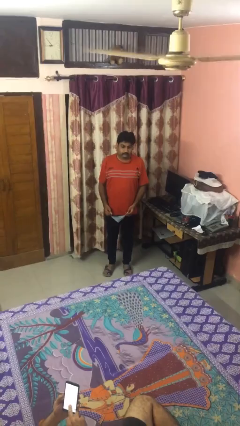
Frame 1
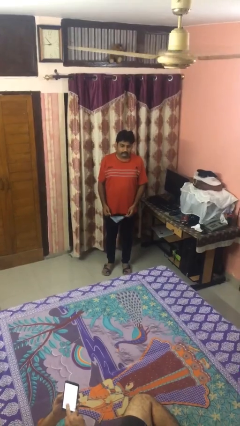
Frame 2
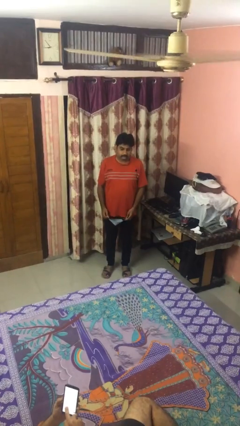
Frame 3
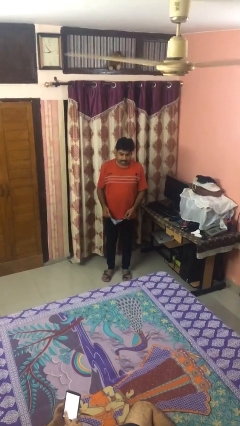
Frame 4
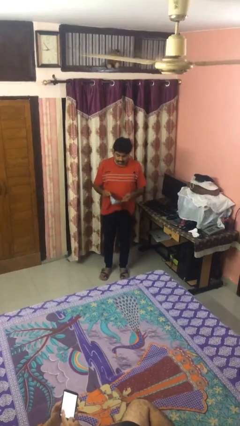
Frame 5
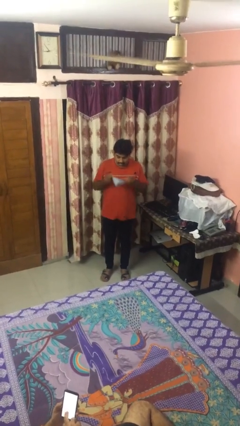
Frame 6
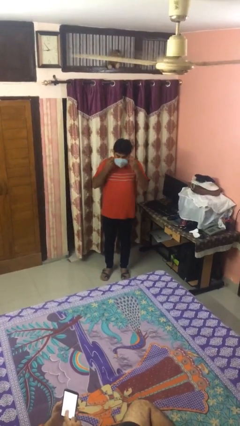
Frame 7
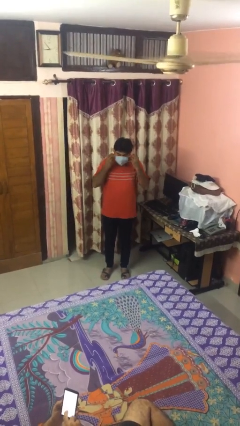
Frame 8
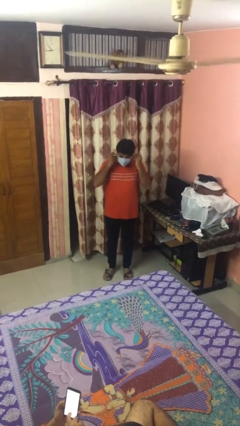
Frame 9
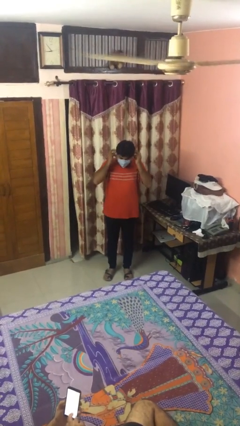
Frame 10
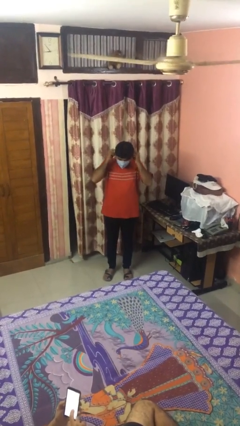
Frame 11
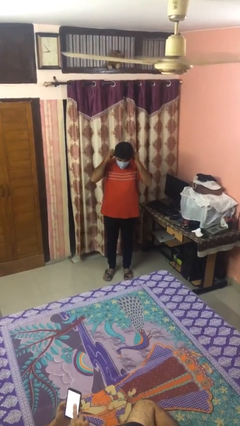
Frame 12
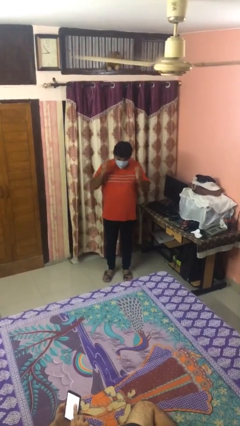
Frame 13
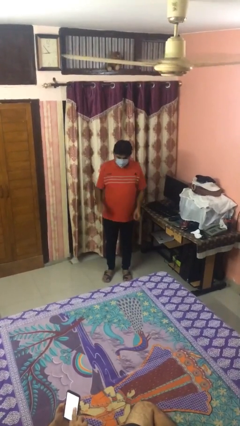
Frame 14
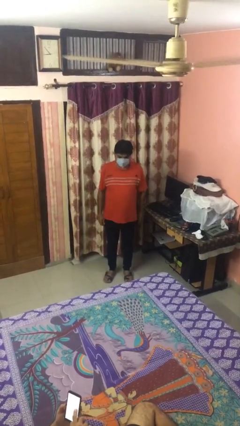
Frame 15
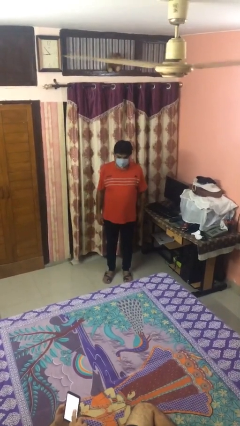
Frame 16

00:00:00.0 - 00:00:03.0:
person puts on facemask

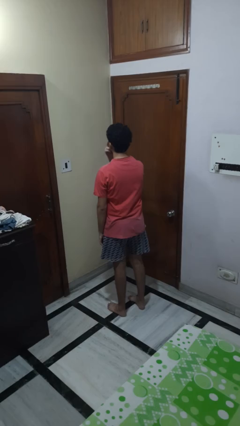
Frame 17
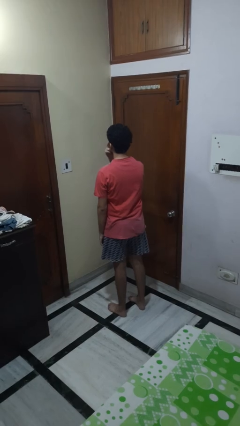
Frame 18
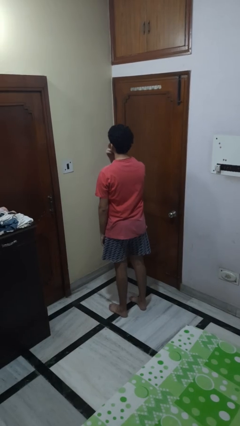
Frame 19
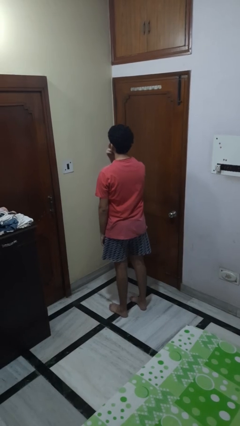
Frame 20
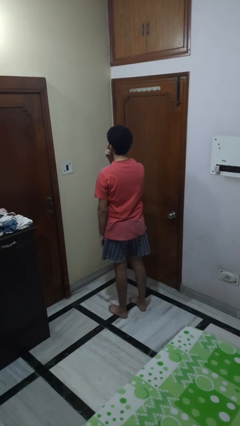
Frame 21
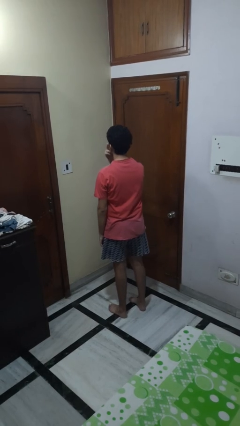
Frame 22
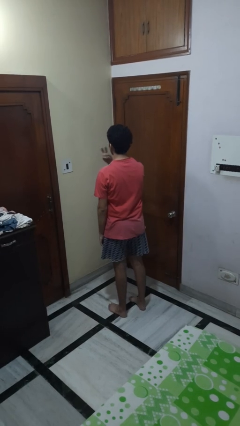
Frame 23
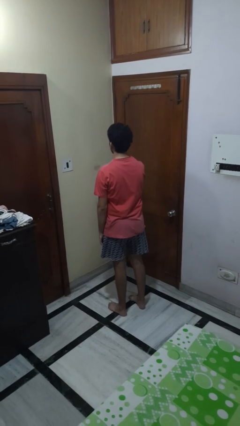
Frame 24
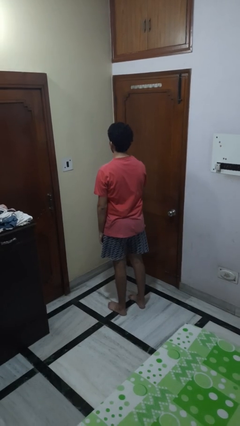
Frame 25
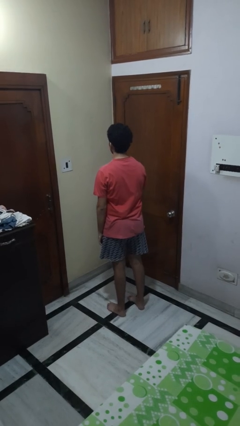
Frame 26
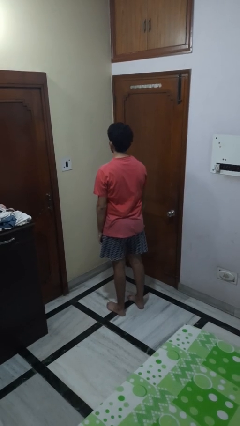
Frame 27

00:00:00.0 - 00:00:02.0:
person gestures watch closely

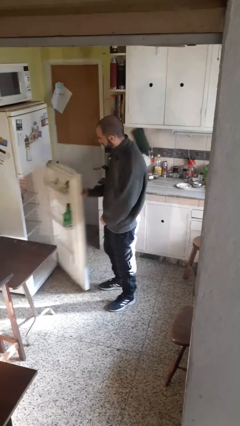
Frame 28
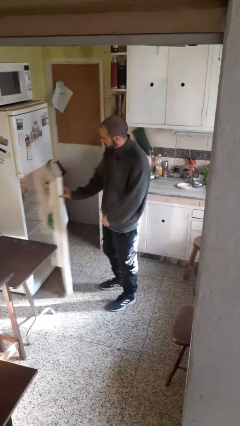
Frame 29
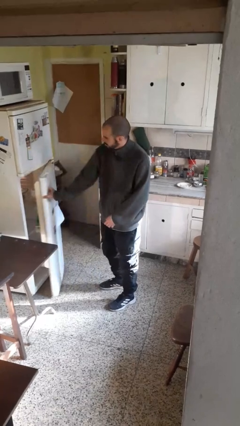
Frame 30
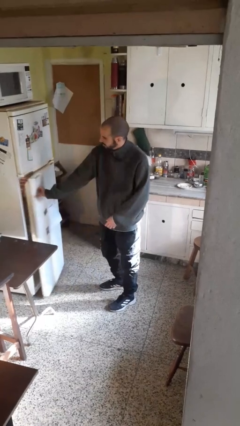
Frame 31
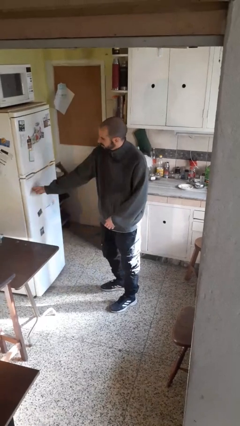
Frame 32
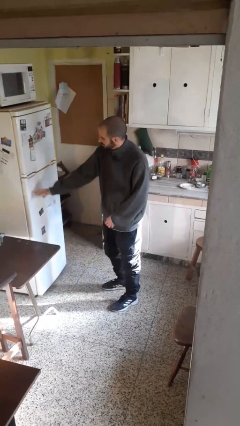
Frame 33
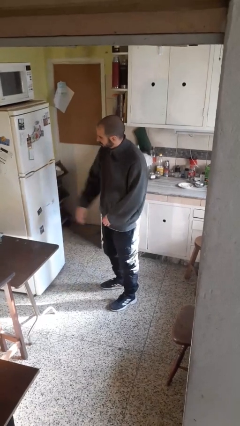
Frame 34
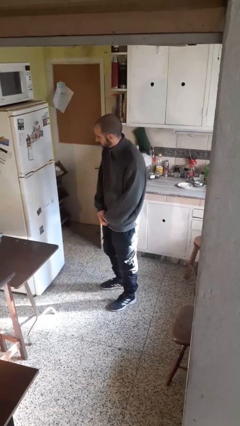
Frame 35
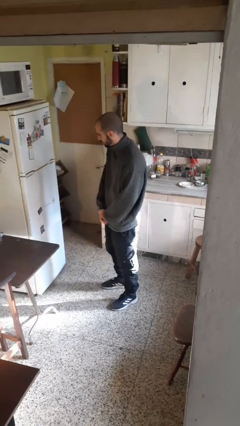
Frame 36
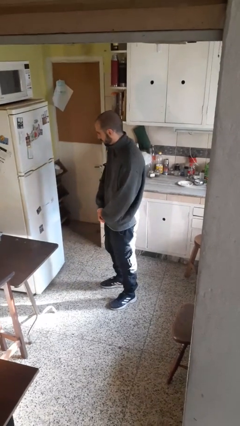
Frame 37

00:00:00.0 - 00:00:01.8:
person closes refrigerator

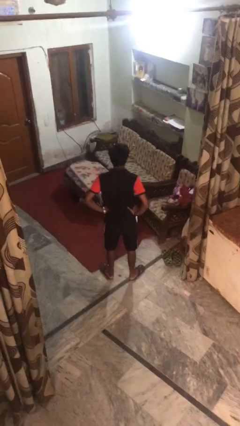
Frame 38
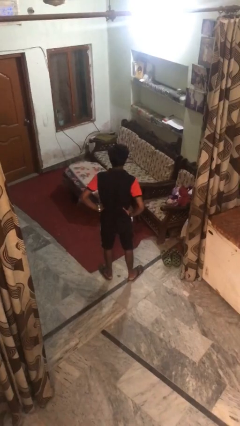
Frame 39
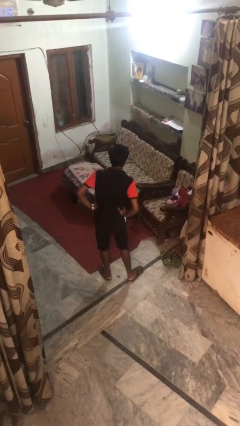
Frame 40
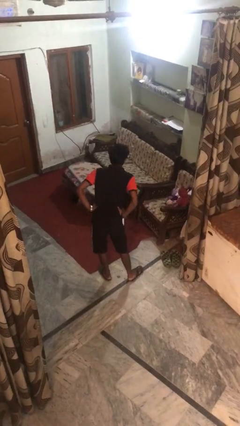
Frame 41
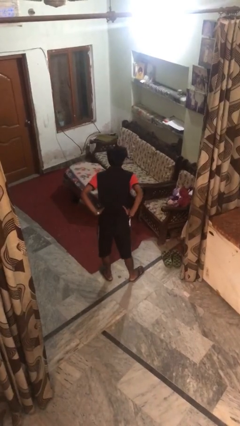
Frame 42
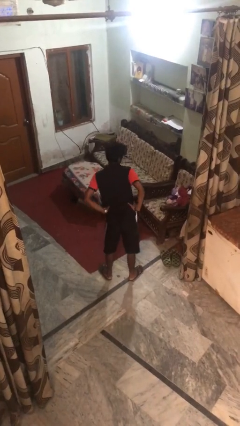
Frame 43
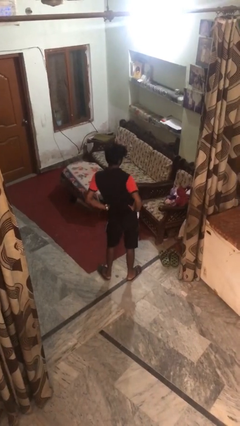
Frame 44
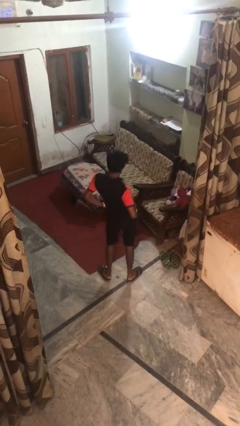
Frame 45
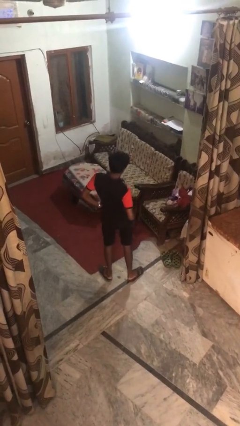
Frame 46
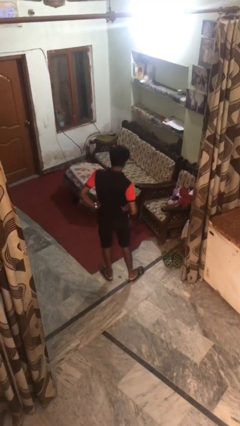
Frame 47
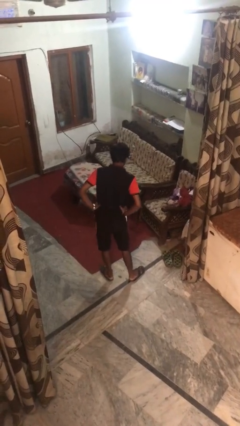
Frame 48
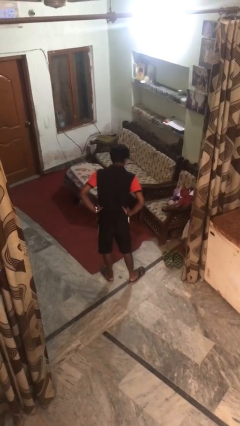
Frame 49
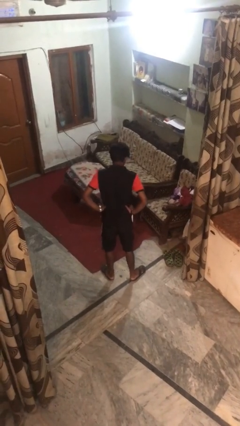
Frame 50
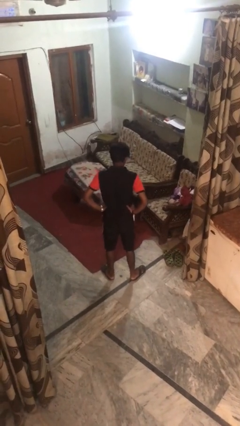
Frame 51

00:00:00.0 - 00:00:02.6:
person wiggles hips

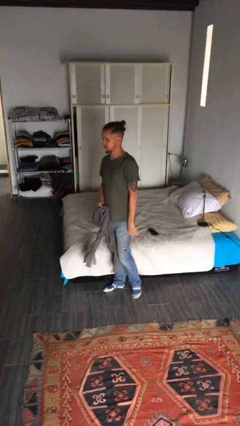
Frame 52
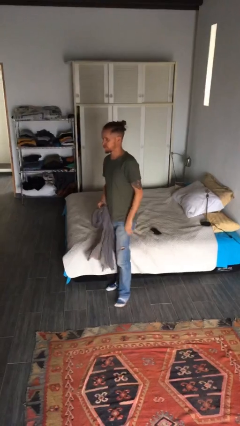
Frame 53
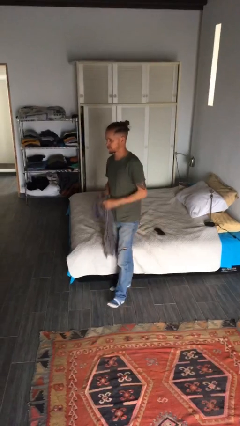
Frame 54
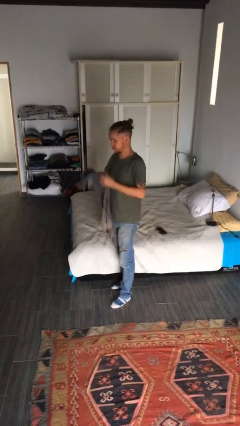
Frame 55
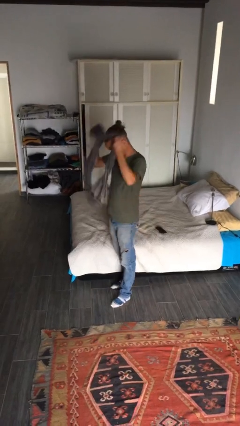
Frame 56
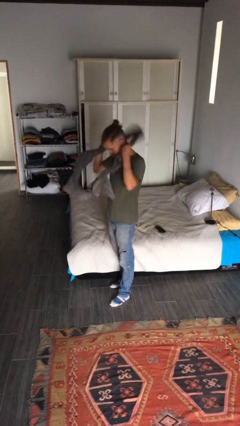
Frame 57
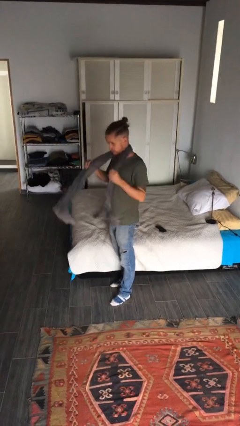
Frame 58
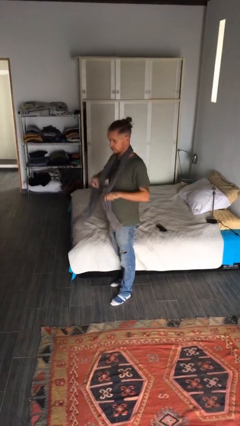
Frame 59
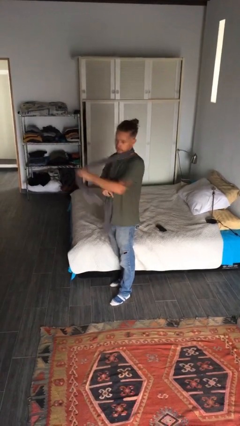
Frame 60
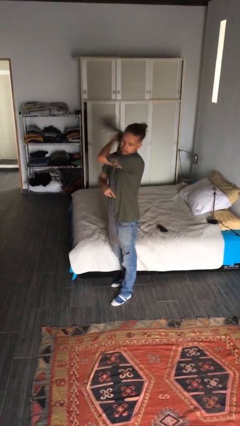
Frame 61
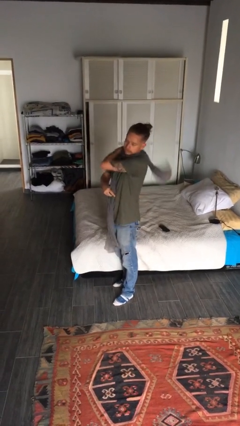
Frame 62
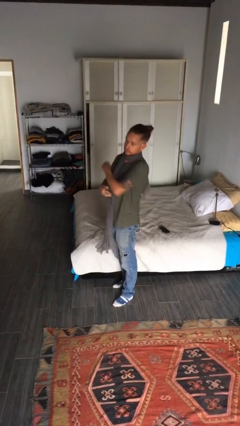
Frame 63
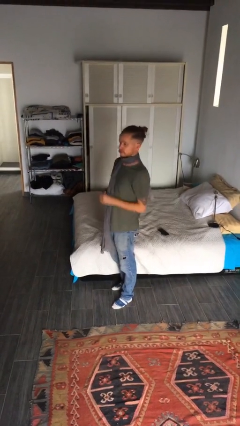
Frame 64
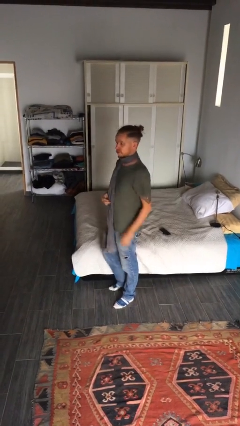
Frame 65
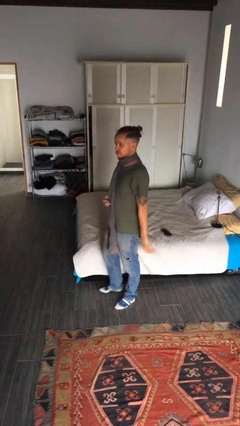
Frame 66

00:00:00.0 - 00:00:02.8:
person puts on scarf

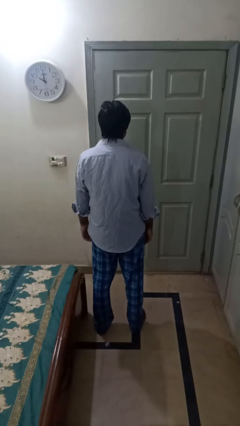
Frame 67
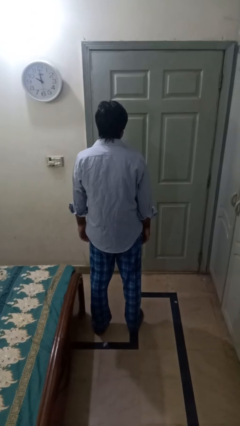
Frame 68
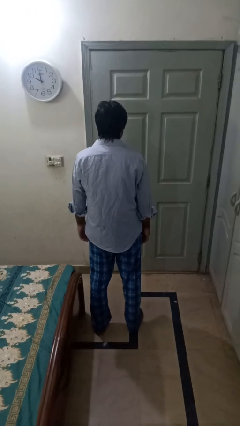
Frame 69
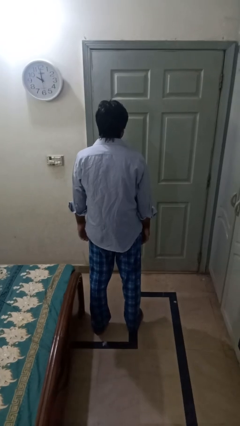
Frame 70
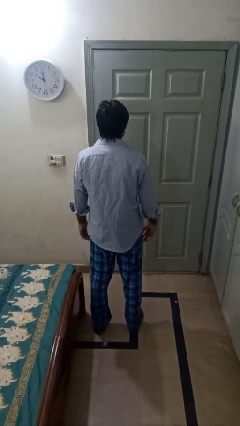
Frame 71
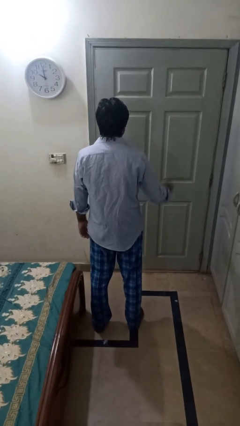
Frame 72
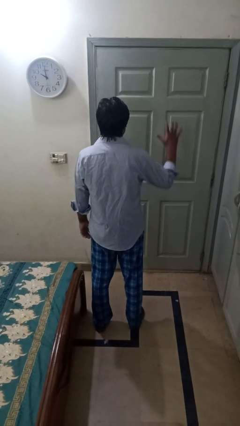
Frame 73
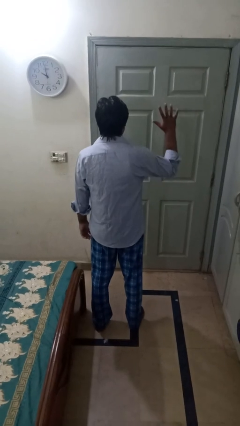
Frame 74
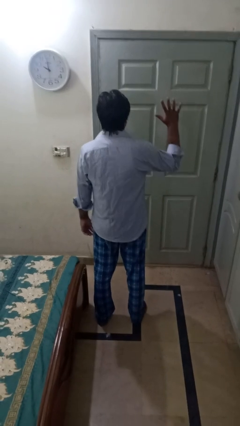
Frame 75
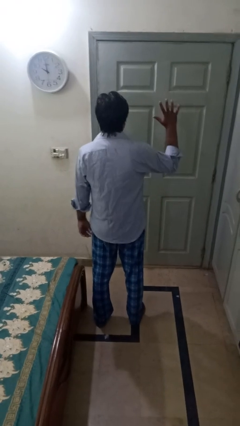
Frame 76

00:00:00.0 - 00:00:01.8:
person gestures number five

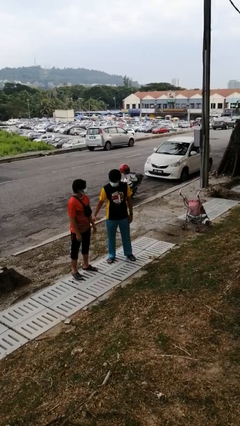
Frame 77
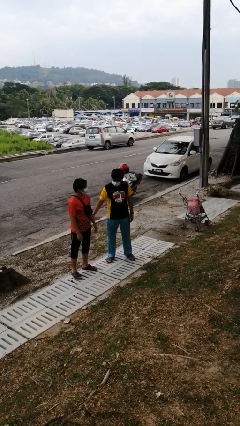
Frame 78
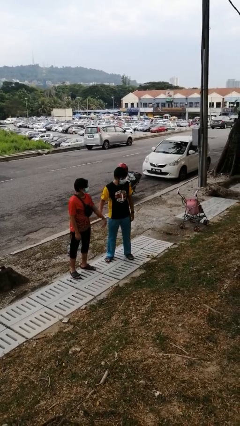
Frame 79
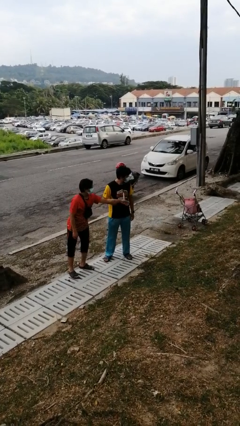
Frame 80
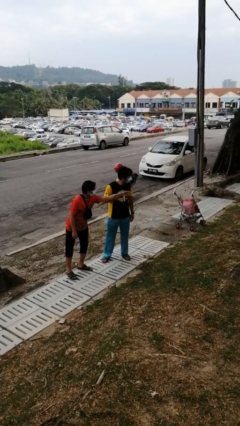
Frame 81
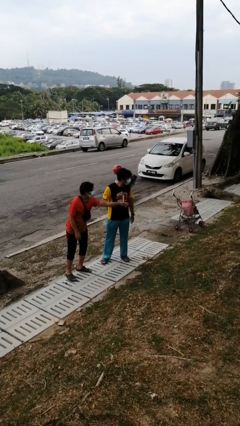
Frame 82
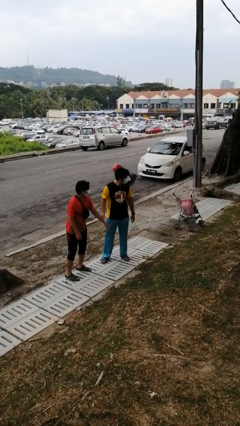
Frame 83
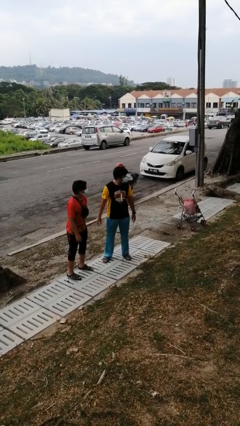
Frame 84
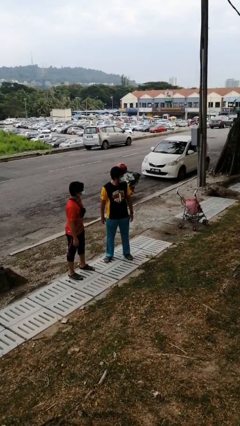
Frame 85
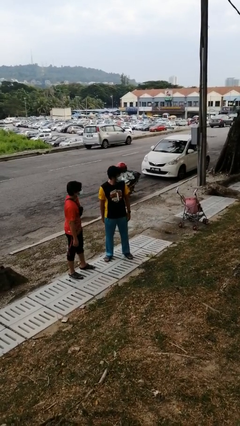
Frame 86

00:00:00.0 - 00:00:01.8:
person grabs person by forearm

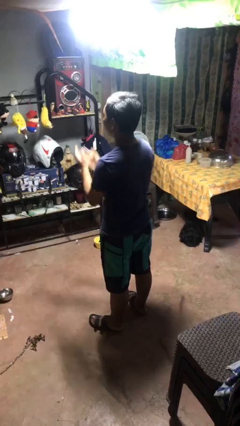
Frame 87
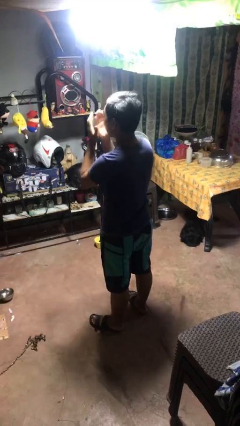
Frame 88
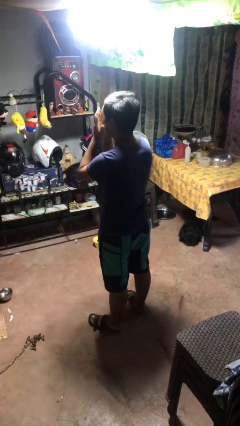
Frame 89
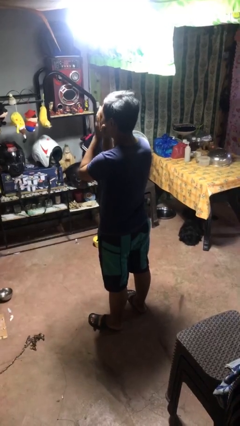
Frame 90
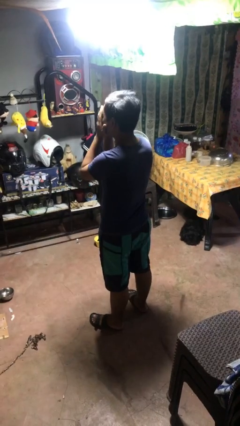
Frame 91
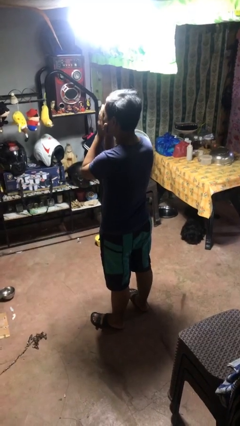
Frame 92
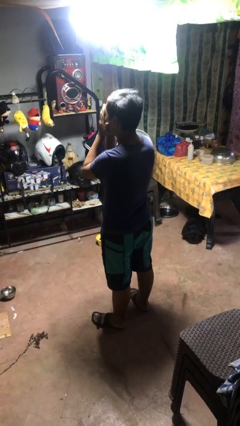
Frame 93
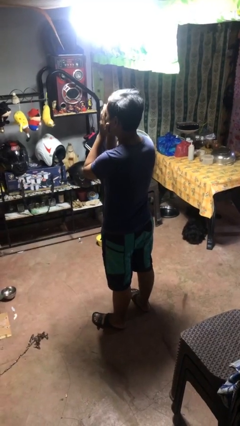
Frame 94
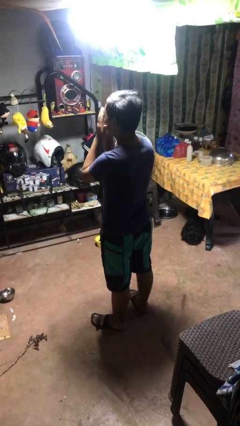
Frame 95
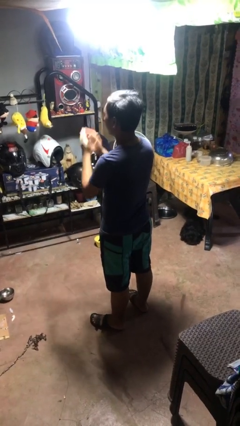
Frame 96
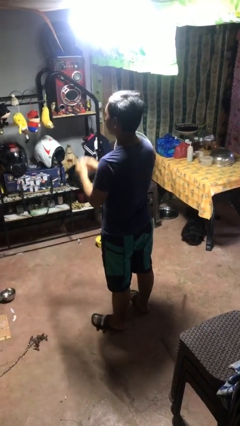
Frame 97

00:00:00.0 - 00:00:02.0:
person covers face with hands
